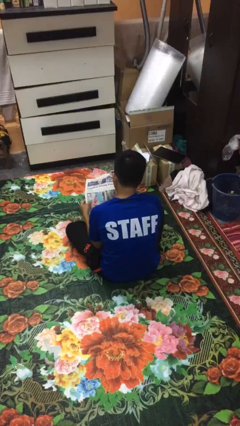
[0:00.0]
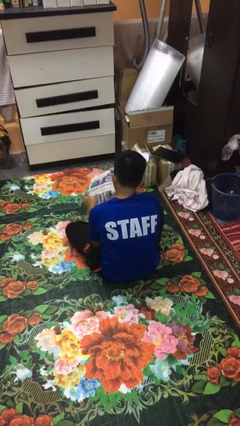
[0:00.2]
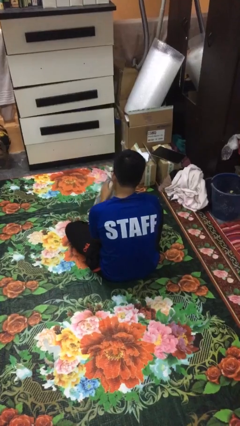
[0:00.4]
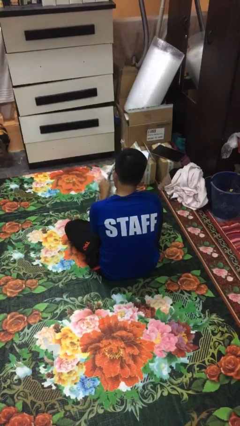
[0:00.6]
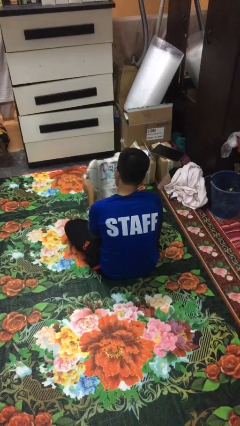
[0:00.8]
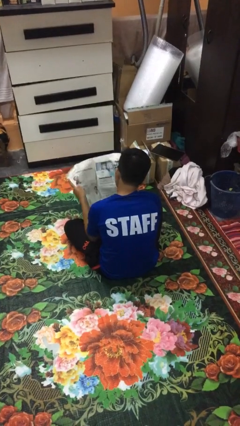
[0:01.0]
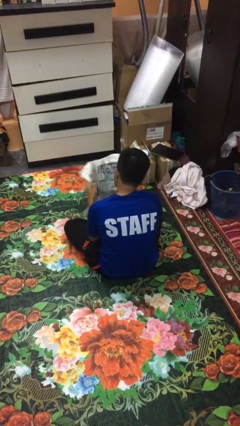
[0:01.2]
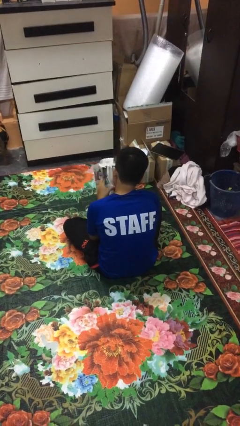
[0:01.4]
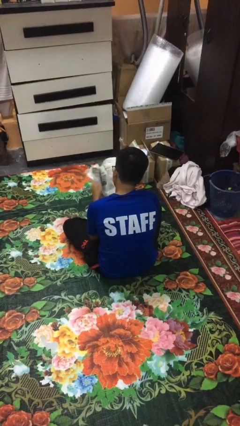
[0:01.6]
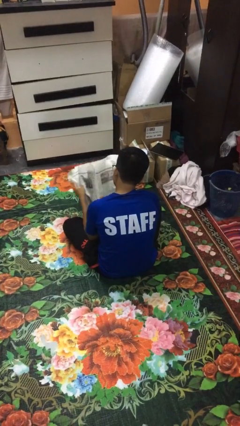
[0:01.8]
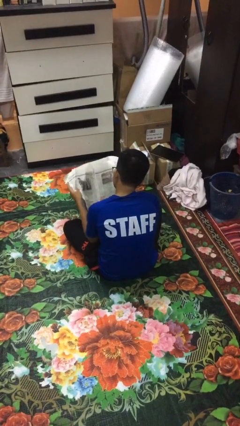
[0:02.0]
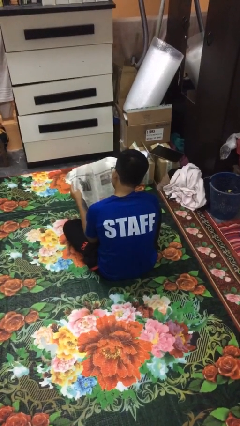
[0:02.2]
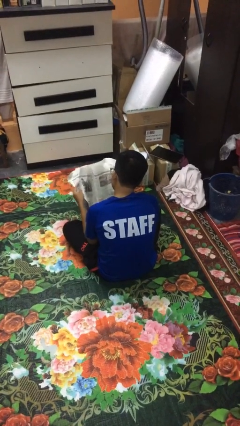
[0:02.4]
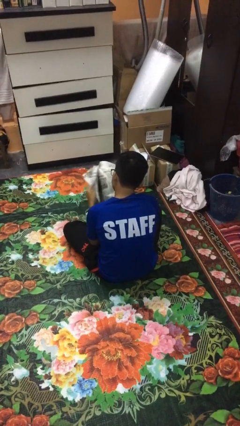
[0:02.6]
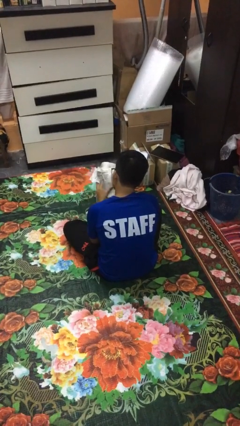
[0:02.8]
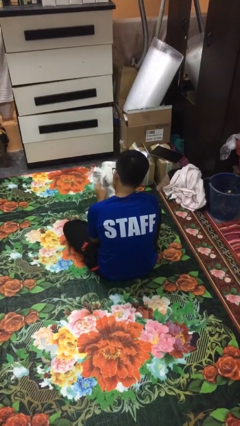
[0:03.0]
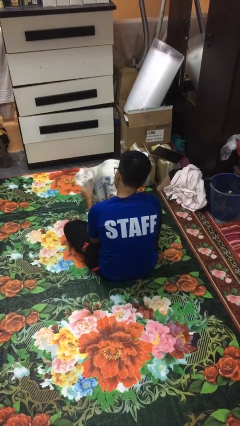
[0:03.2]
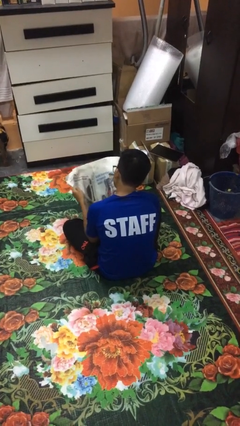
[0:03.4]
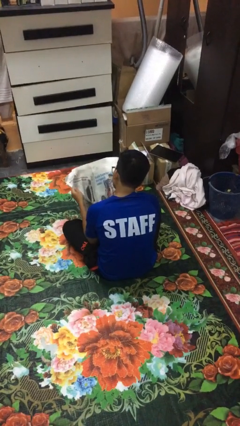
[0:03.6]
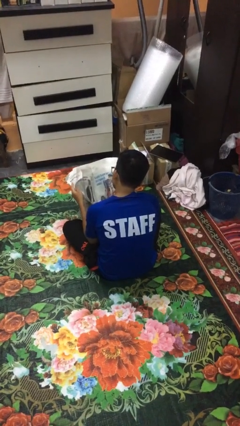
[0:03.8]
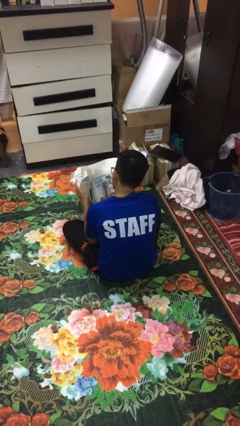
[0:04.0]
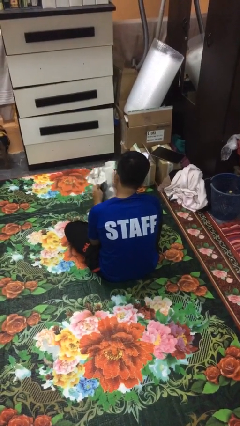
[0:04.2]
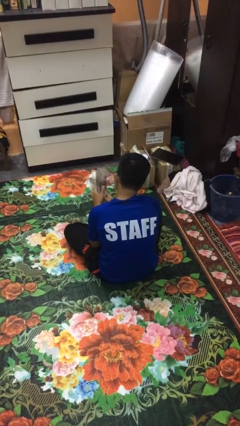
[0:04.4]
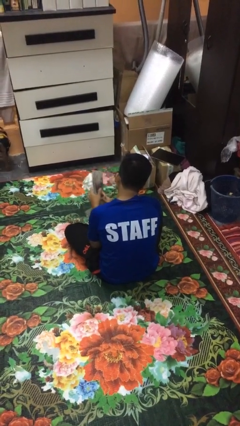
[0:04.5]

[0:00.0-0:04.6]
person reads newspaper

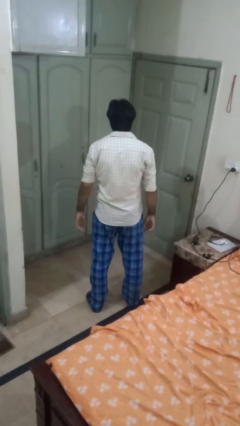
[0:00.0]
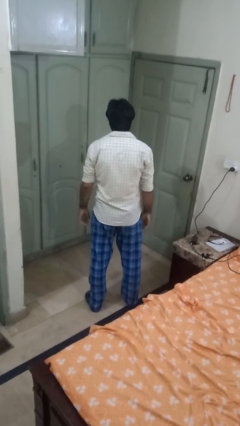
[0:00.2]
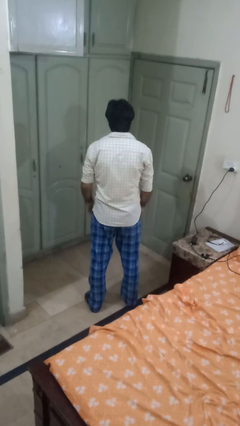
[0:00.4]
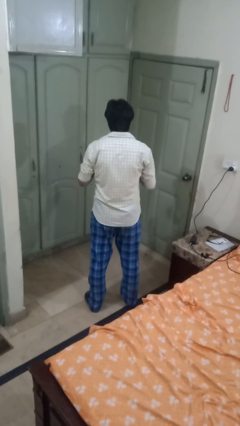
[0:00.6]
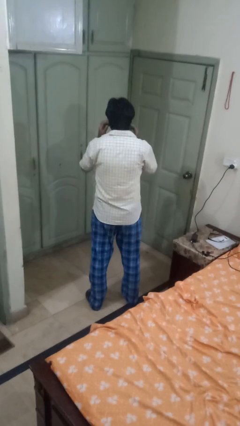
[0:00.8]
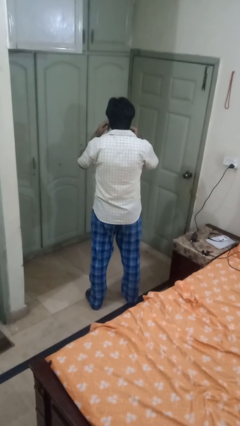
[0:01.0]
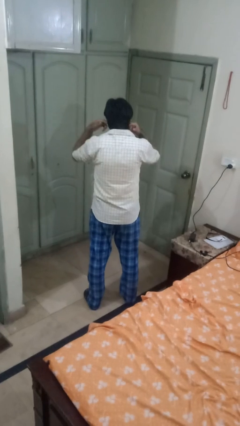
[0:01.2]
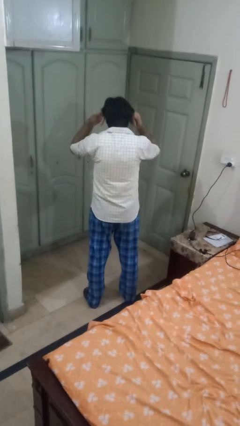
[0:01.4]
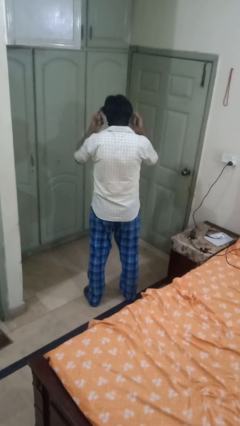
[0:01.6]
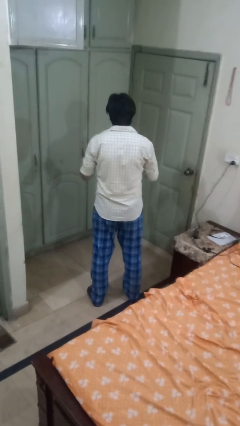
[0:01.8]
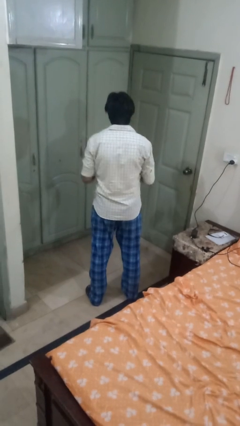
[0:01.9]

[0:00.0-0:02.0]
person takes off facemask

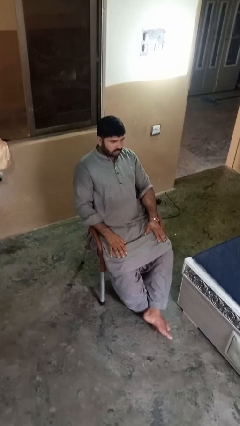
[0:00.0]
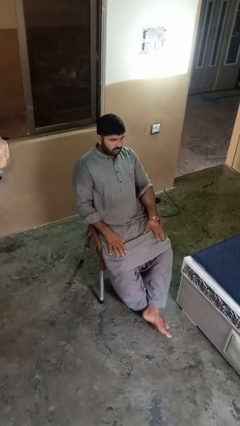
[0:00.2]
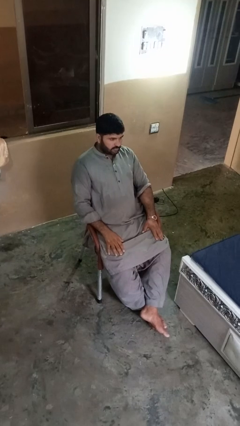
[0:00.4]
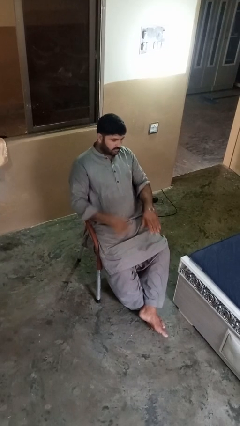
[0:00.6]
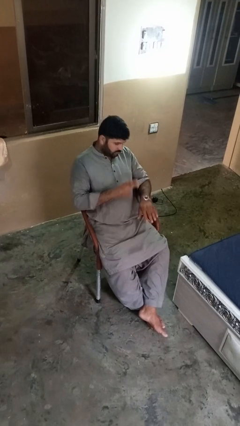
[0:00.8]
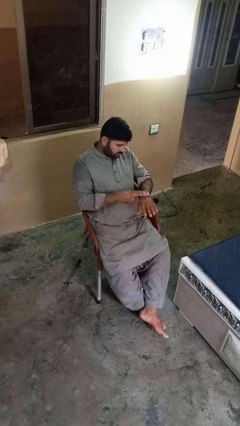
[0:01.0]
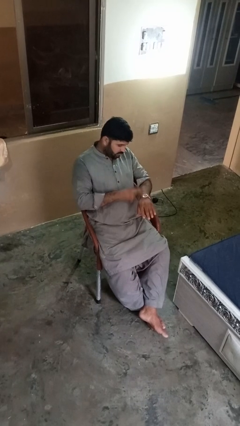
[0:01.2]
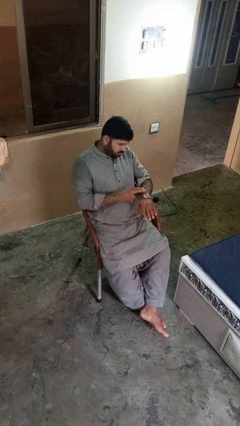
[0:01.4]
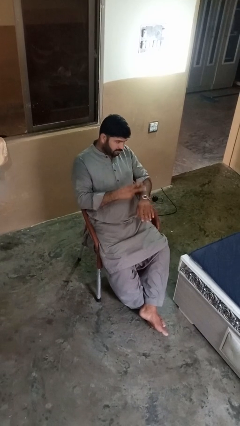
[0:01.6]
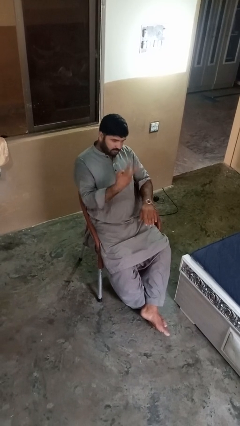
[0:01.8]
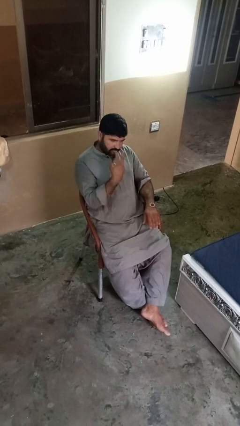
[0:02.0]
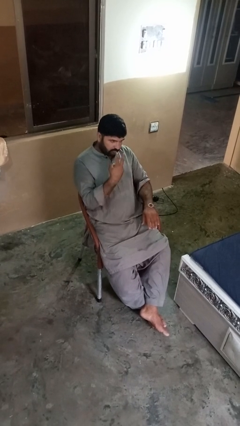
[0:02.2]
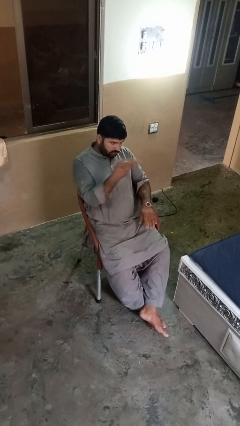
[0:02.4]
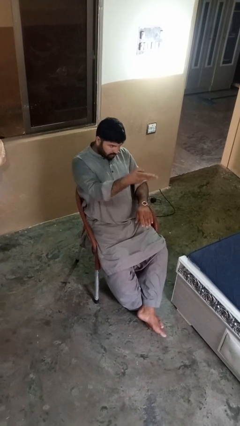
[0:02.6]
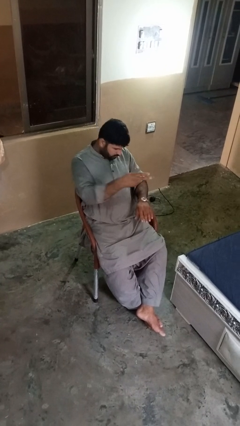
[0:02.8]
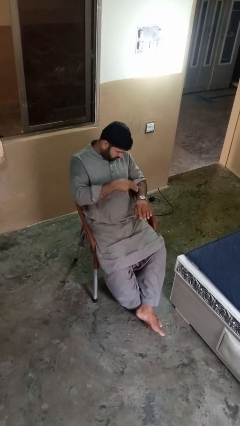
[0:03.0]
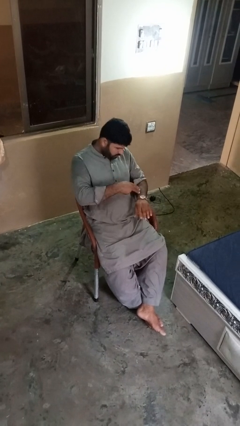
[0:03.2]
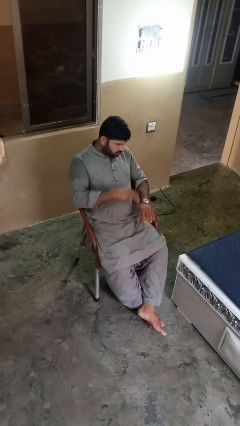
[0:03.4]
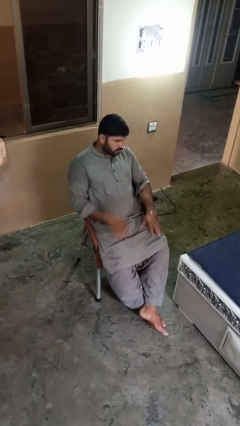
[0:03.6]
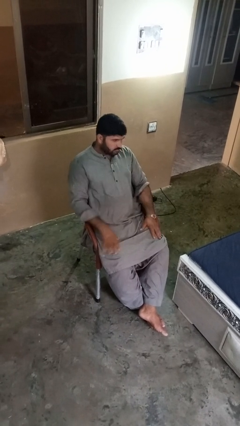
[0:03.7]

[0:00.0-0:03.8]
person gestures watch closely

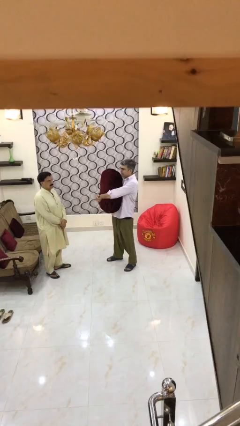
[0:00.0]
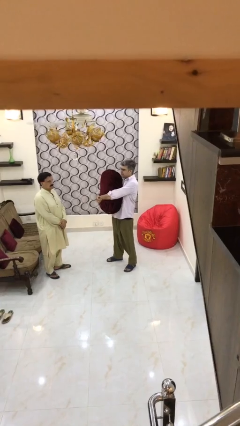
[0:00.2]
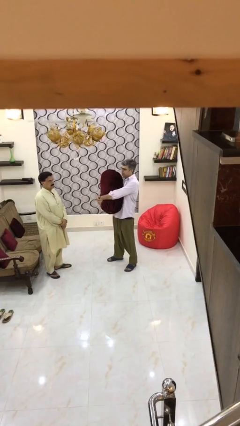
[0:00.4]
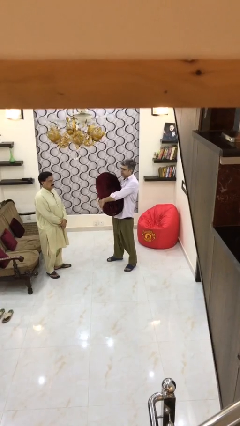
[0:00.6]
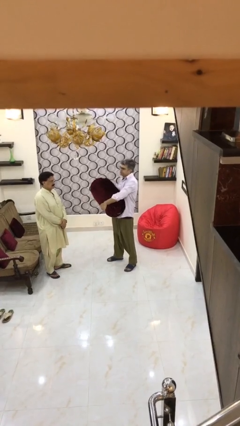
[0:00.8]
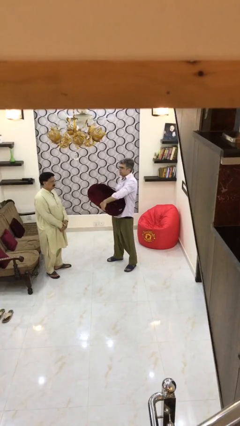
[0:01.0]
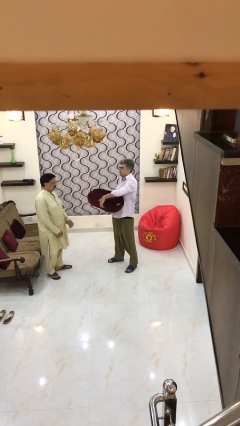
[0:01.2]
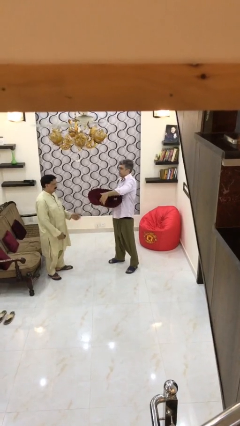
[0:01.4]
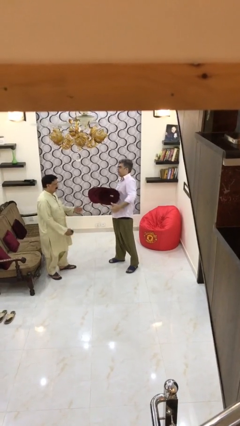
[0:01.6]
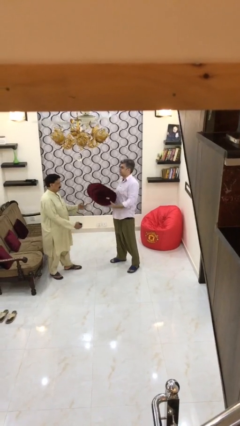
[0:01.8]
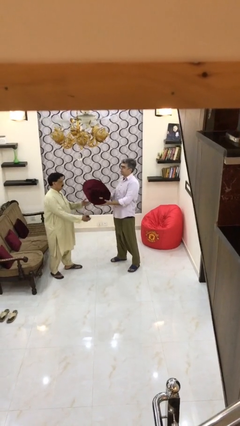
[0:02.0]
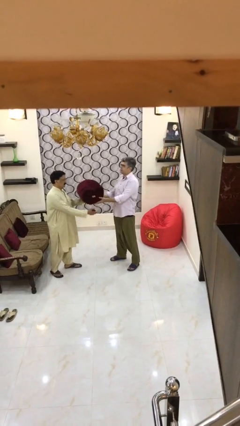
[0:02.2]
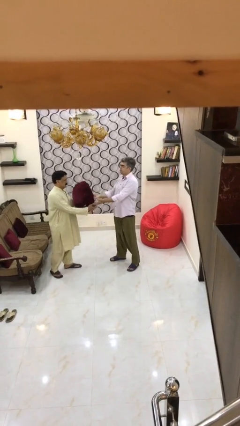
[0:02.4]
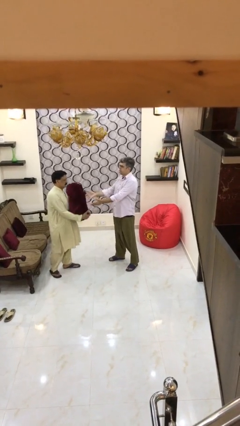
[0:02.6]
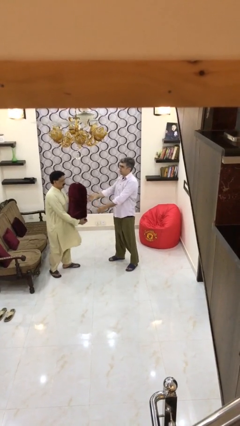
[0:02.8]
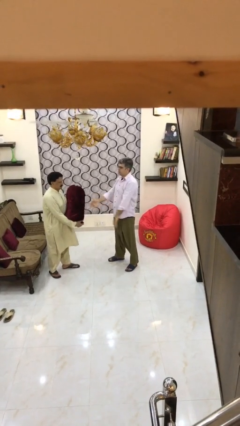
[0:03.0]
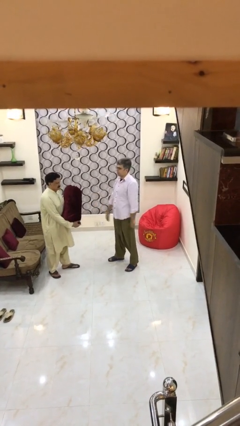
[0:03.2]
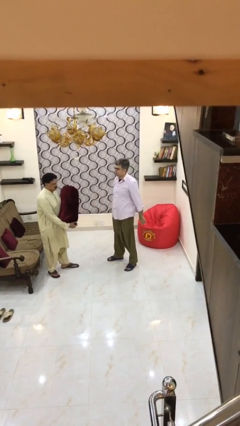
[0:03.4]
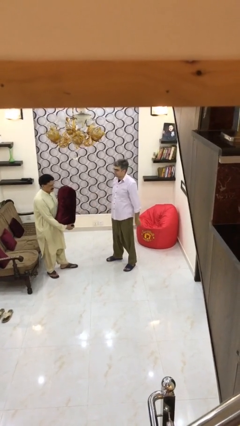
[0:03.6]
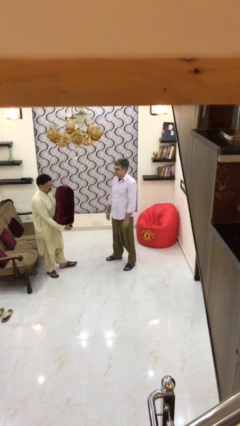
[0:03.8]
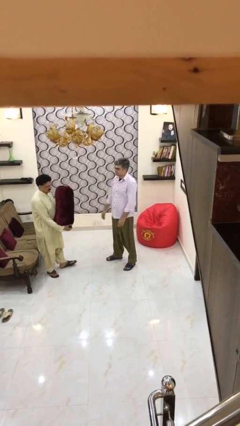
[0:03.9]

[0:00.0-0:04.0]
person transfers object to person

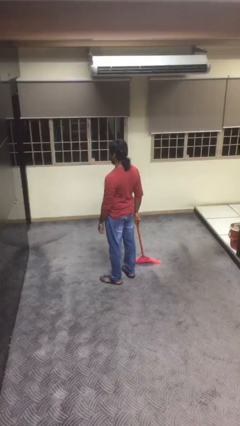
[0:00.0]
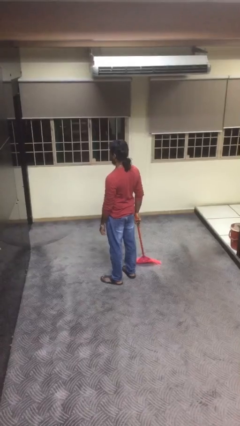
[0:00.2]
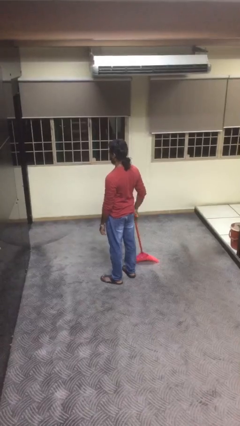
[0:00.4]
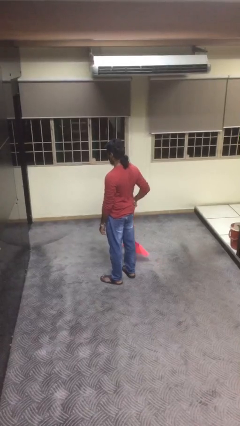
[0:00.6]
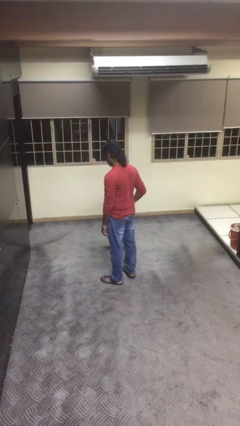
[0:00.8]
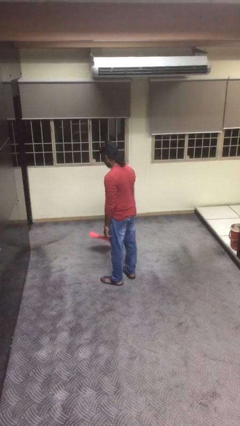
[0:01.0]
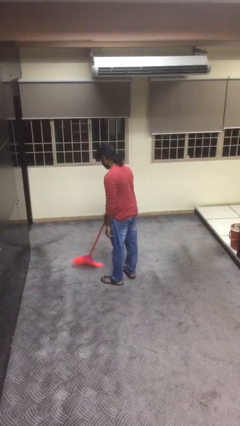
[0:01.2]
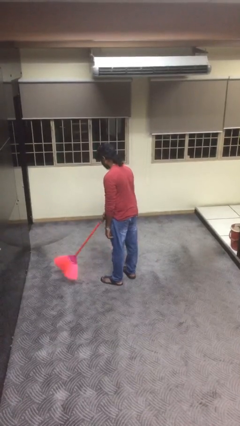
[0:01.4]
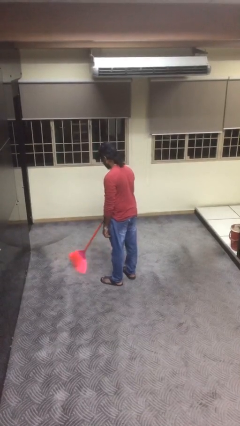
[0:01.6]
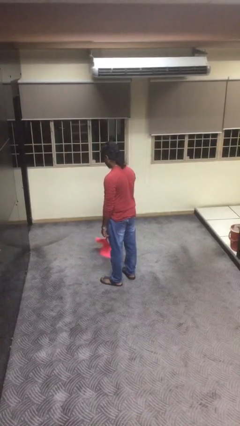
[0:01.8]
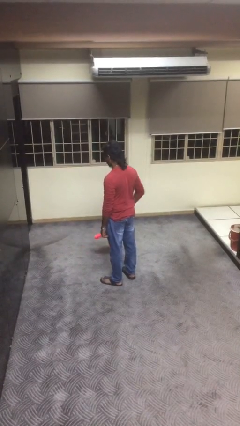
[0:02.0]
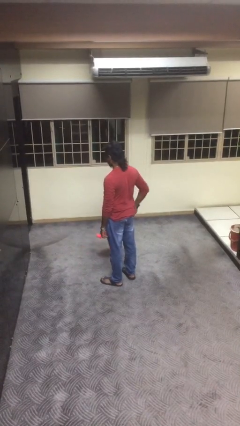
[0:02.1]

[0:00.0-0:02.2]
person sweeps floor

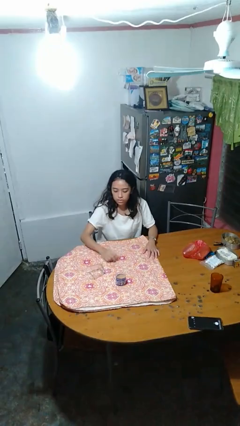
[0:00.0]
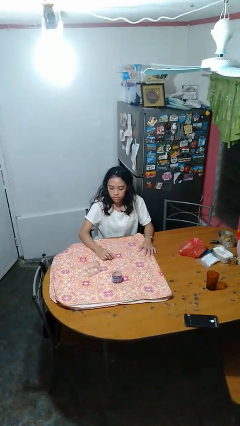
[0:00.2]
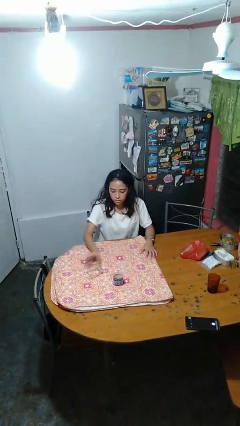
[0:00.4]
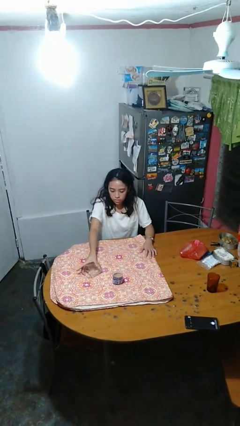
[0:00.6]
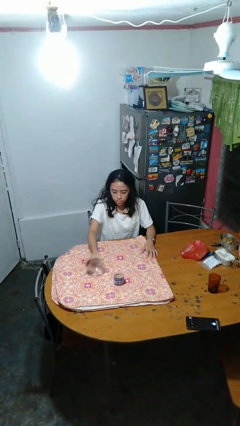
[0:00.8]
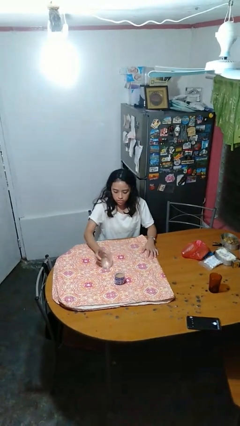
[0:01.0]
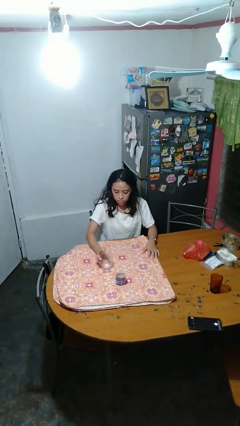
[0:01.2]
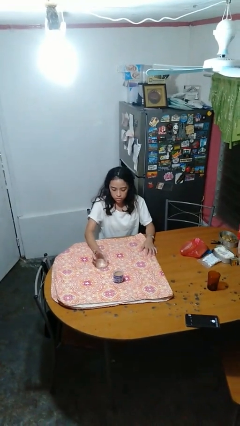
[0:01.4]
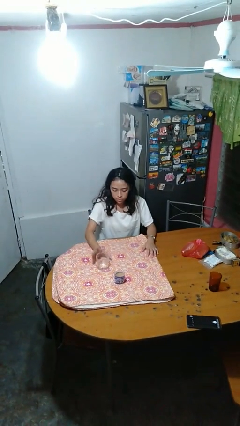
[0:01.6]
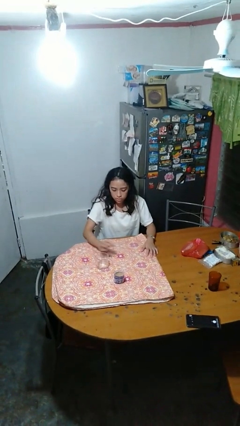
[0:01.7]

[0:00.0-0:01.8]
person sets upright glass
